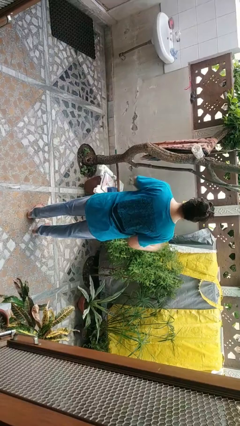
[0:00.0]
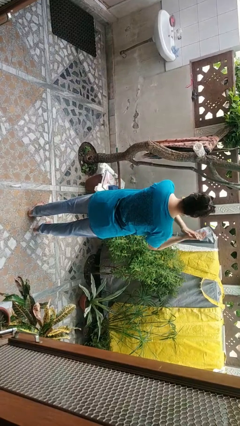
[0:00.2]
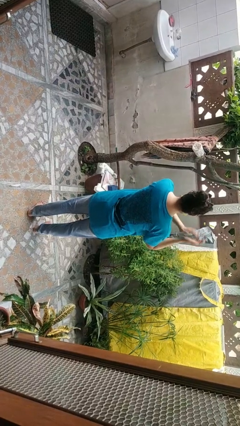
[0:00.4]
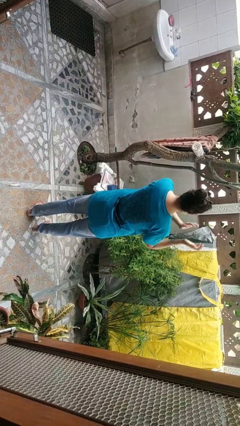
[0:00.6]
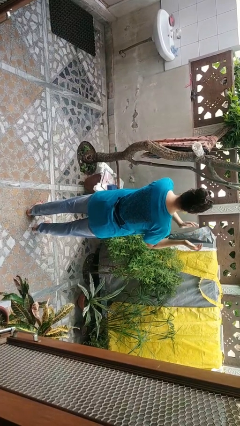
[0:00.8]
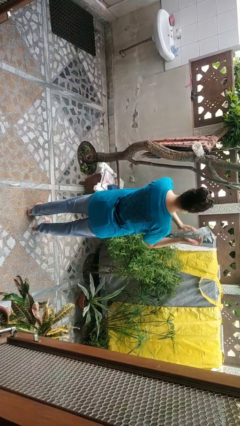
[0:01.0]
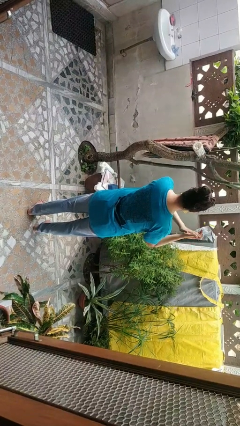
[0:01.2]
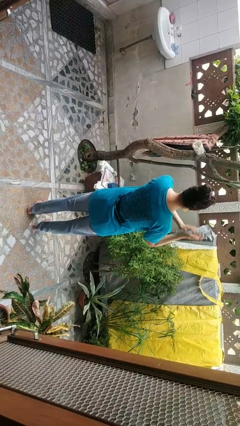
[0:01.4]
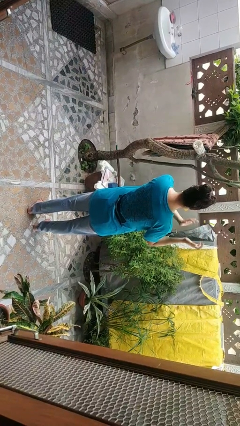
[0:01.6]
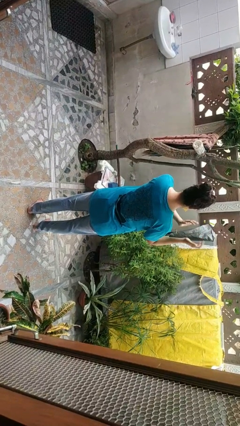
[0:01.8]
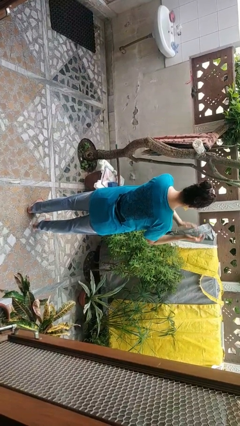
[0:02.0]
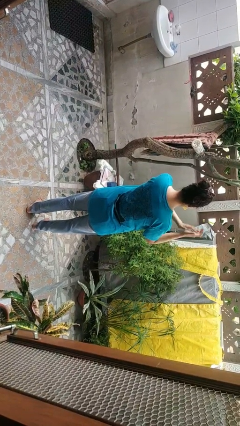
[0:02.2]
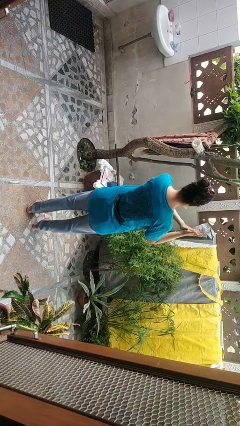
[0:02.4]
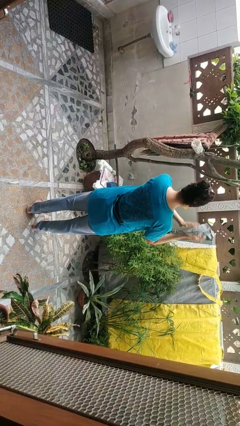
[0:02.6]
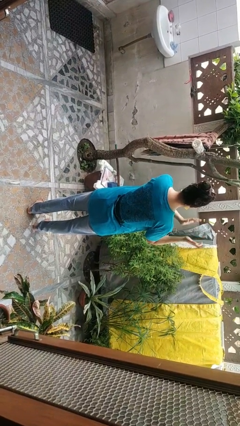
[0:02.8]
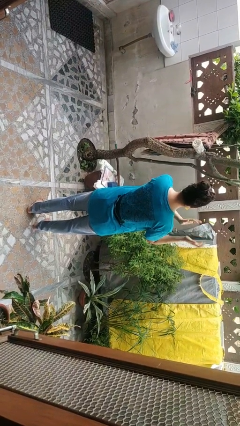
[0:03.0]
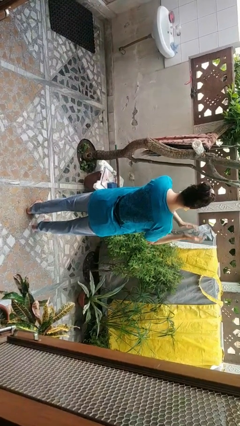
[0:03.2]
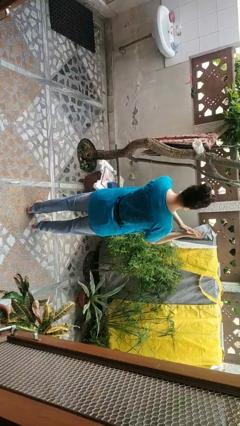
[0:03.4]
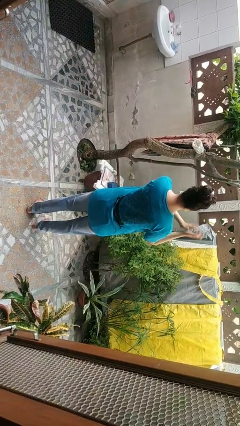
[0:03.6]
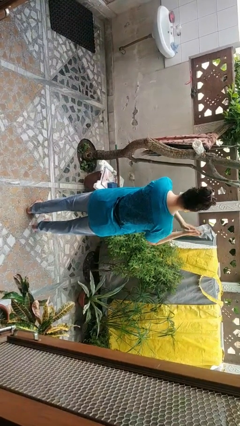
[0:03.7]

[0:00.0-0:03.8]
person claps hands

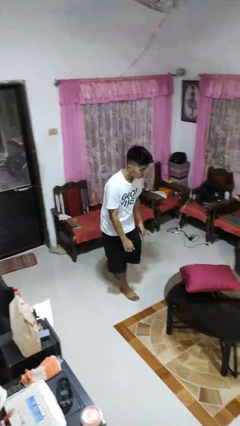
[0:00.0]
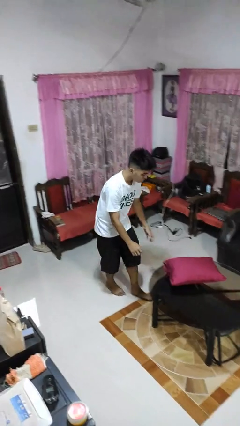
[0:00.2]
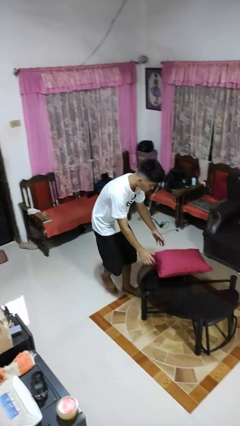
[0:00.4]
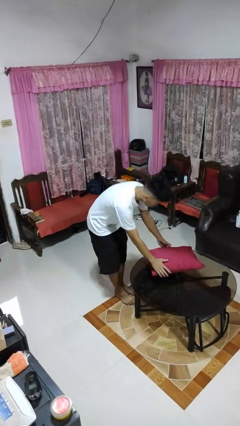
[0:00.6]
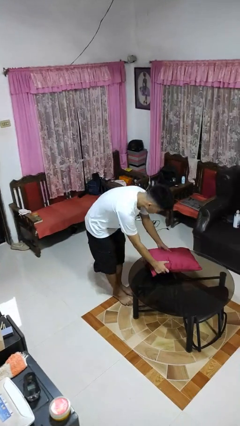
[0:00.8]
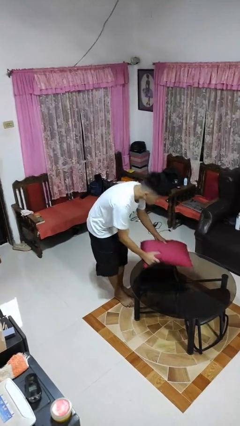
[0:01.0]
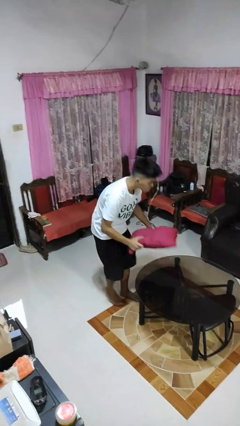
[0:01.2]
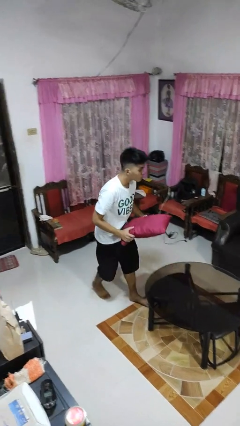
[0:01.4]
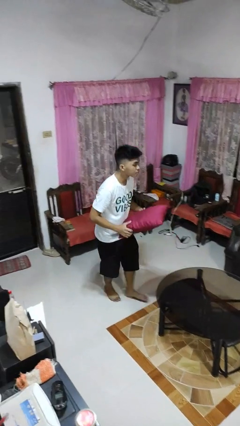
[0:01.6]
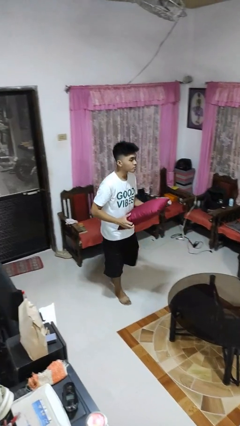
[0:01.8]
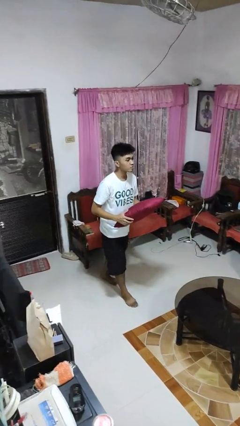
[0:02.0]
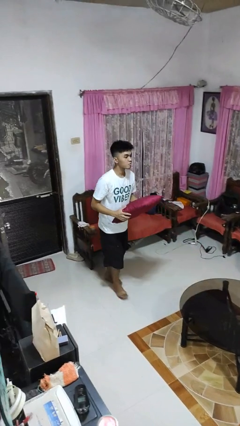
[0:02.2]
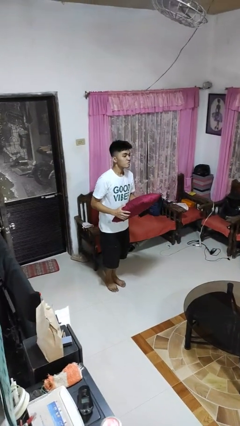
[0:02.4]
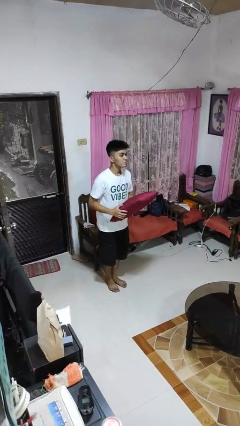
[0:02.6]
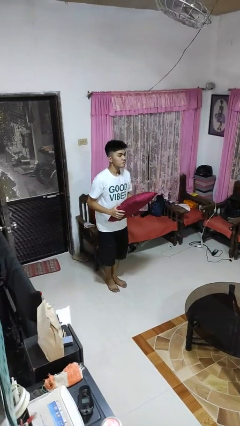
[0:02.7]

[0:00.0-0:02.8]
person picks up object from table

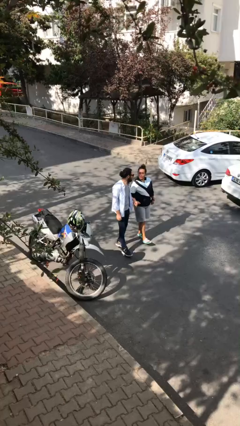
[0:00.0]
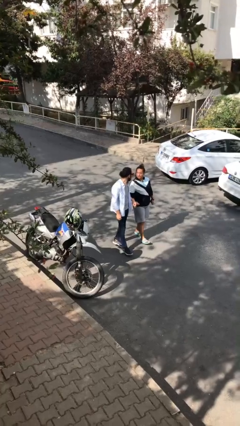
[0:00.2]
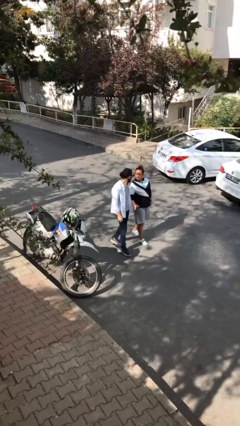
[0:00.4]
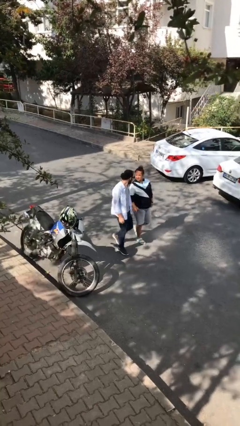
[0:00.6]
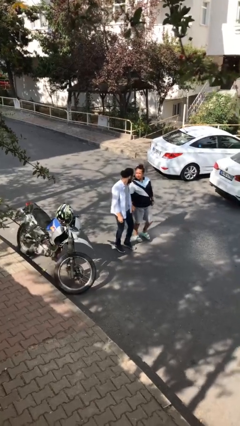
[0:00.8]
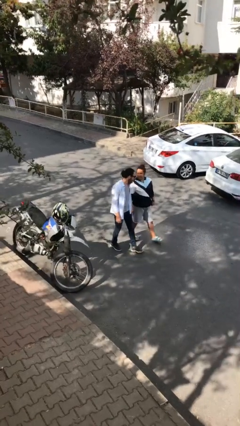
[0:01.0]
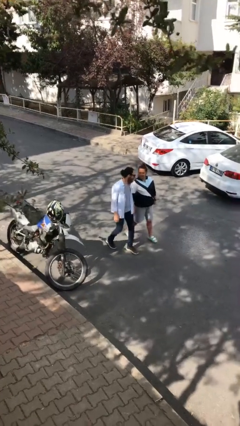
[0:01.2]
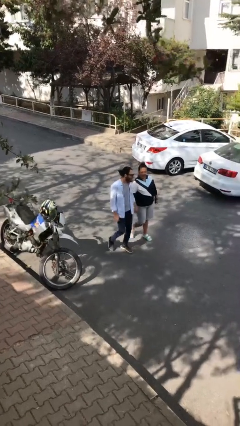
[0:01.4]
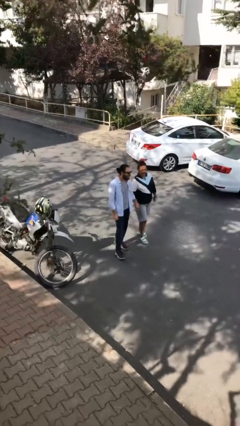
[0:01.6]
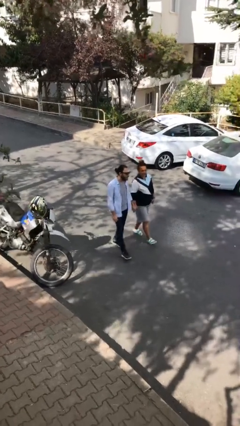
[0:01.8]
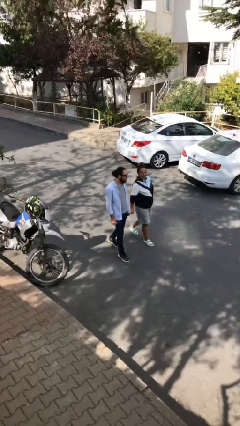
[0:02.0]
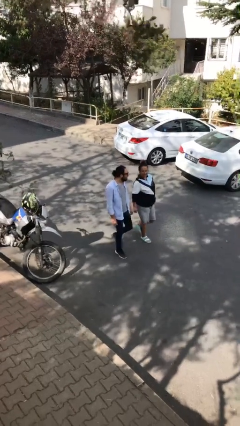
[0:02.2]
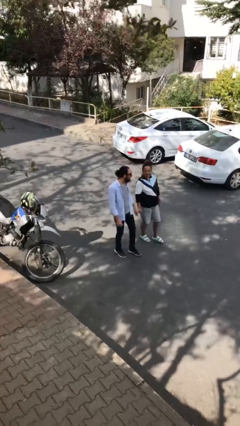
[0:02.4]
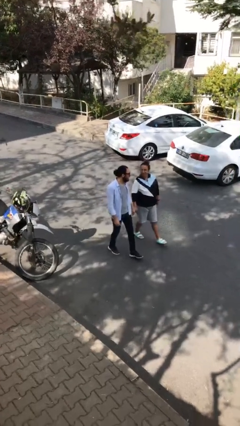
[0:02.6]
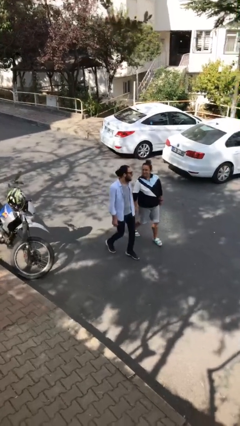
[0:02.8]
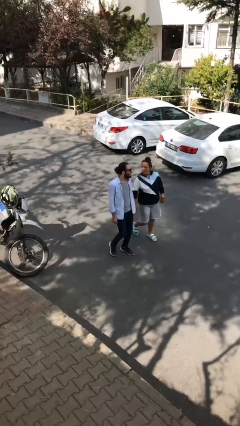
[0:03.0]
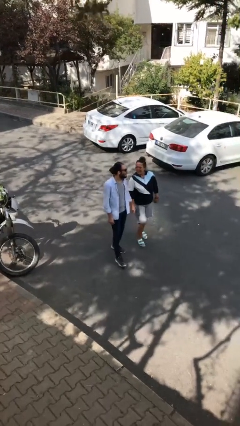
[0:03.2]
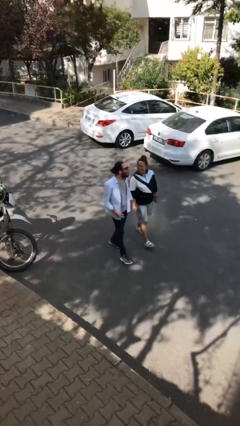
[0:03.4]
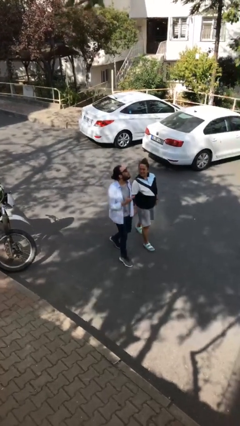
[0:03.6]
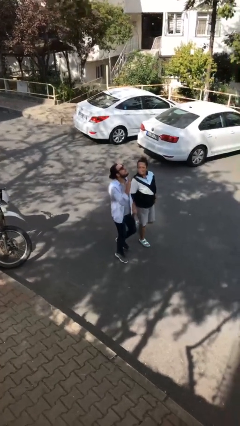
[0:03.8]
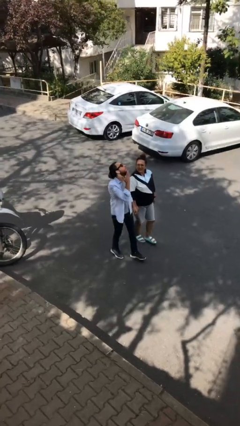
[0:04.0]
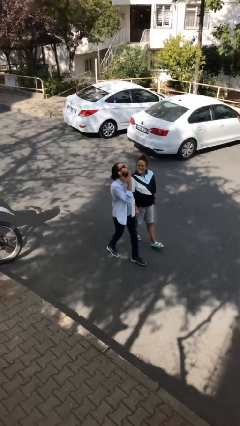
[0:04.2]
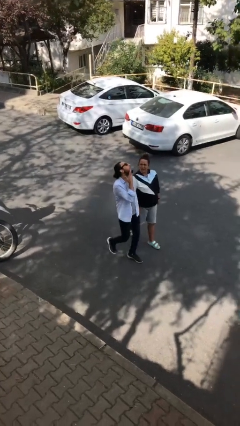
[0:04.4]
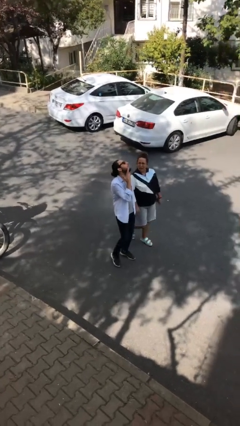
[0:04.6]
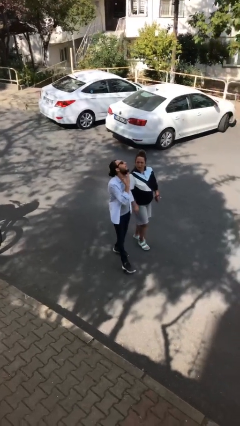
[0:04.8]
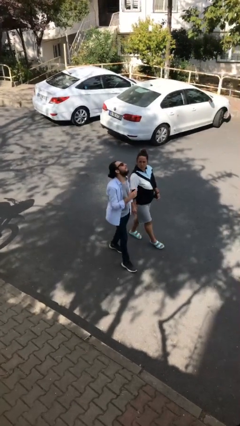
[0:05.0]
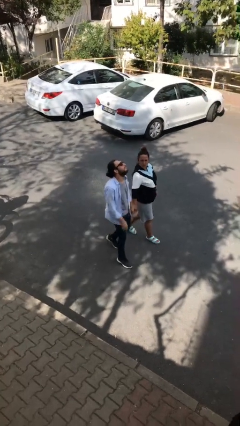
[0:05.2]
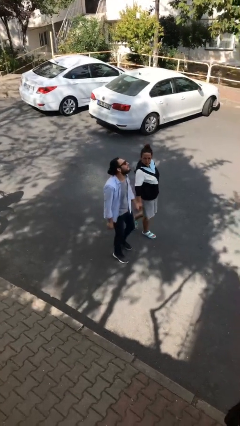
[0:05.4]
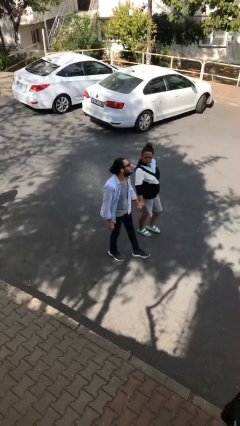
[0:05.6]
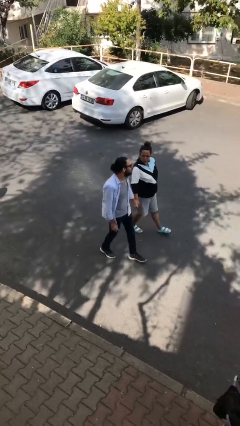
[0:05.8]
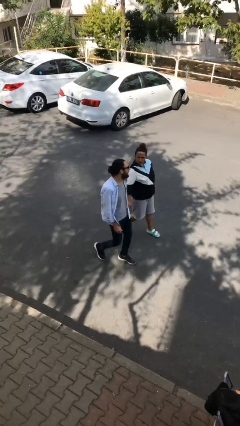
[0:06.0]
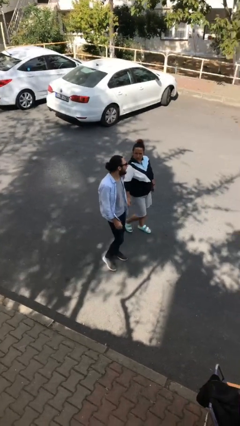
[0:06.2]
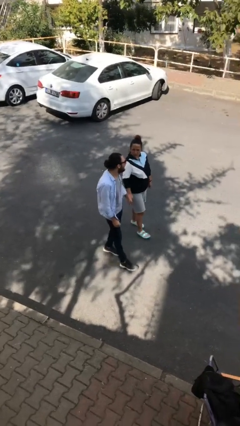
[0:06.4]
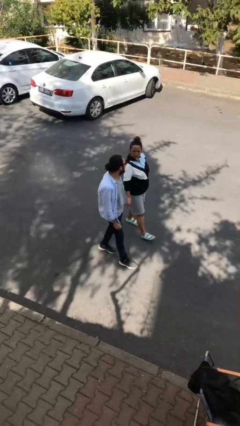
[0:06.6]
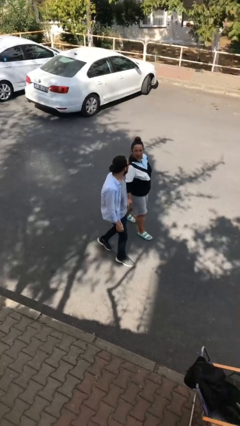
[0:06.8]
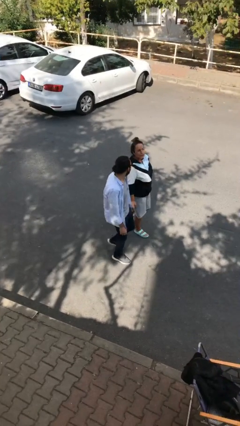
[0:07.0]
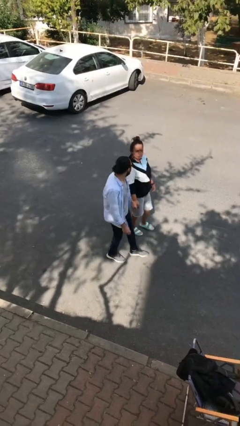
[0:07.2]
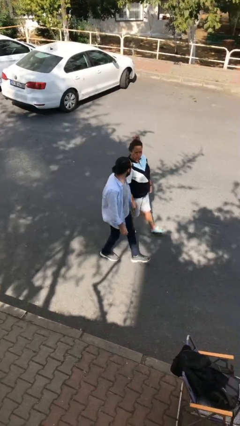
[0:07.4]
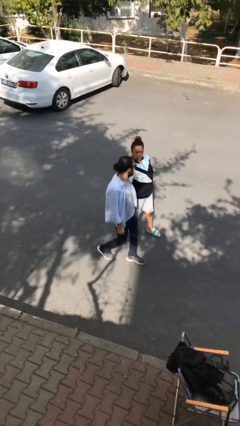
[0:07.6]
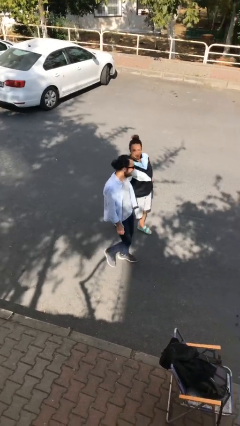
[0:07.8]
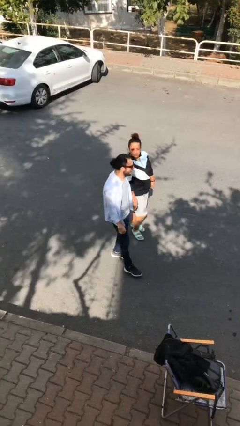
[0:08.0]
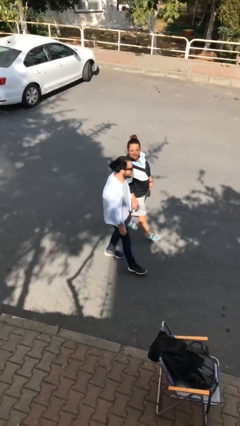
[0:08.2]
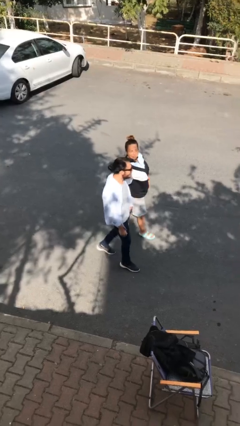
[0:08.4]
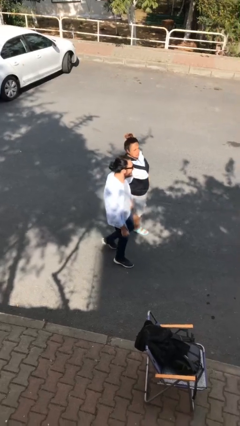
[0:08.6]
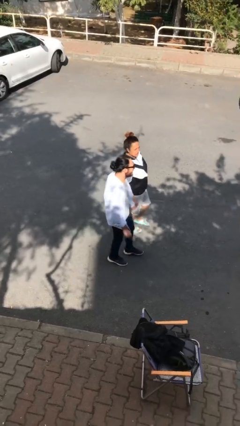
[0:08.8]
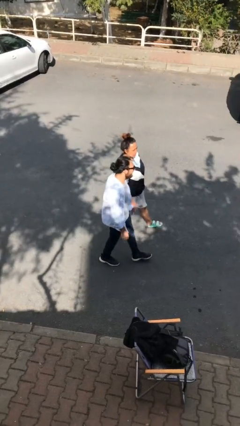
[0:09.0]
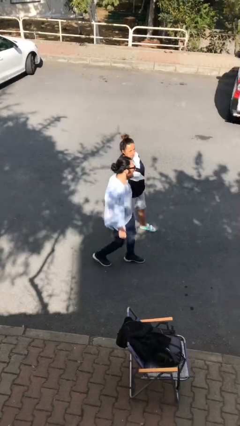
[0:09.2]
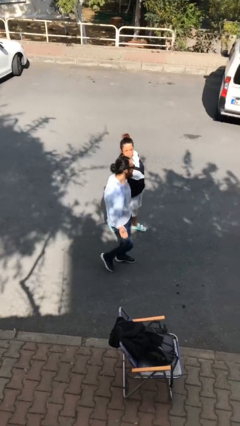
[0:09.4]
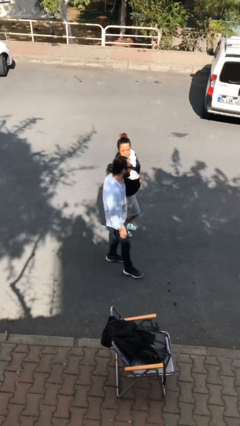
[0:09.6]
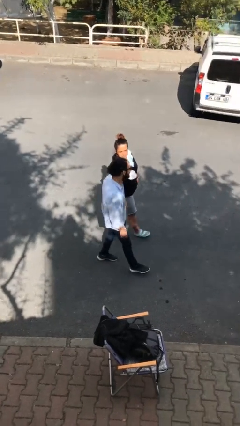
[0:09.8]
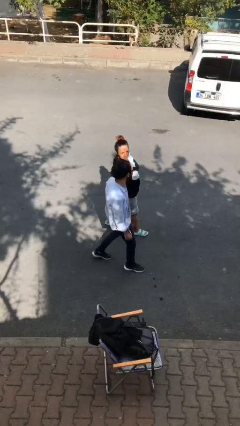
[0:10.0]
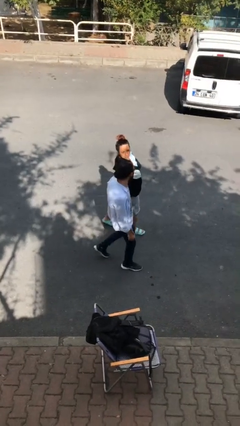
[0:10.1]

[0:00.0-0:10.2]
person holds hand

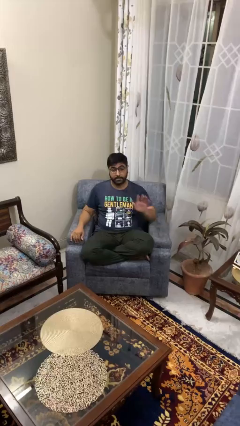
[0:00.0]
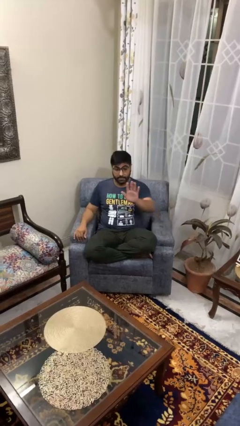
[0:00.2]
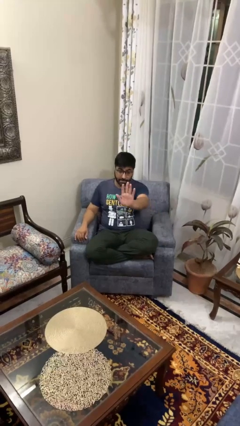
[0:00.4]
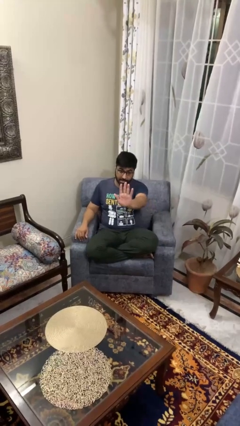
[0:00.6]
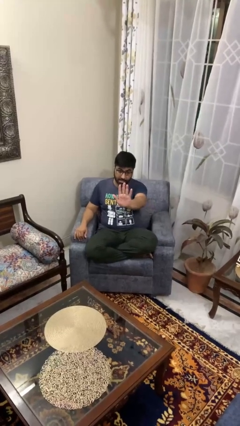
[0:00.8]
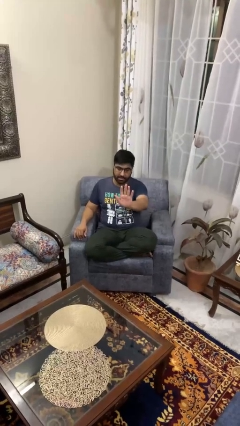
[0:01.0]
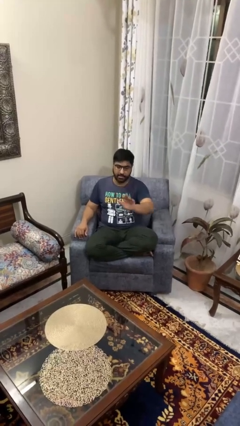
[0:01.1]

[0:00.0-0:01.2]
person gestures stop
